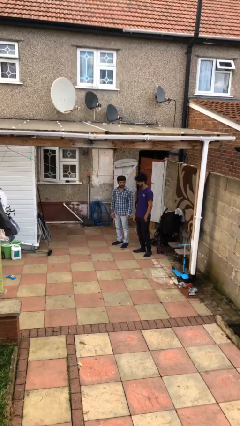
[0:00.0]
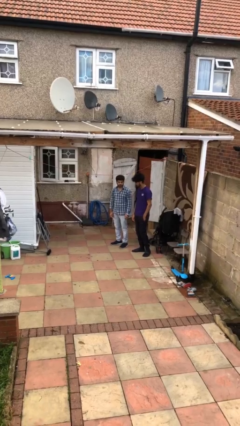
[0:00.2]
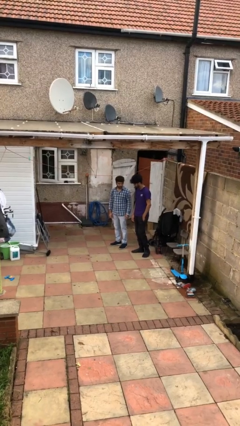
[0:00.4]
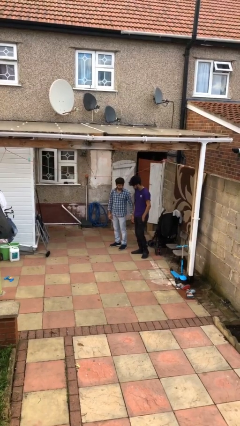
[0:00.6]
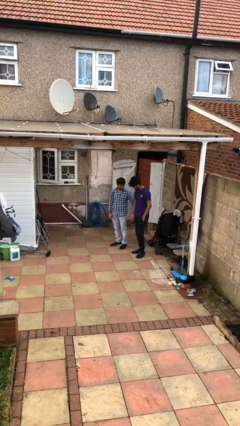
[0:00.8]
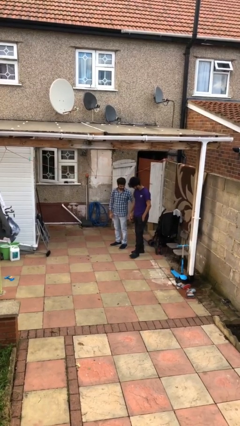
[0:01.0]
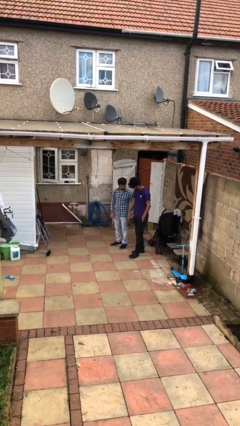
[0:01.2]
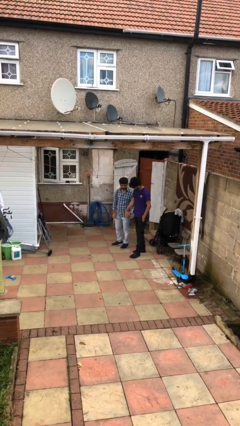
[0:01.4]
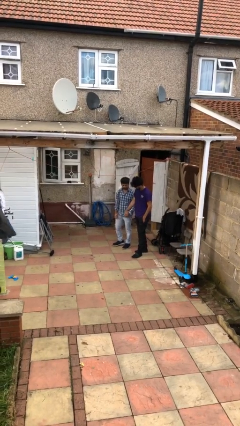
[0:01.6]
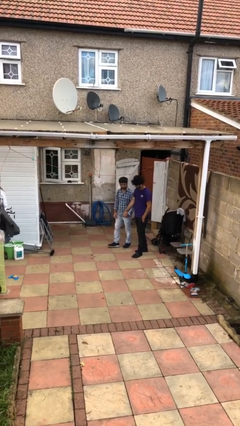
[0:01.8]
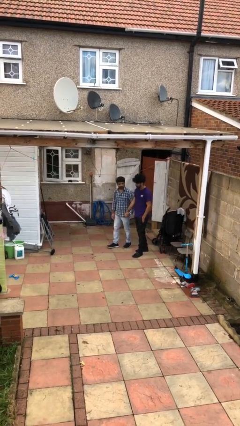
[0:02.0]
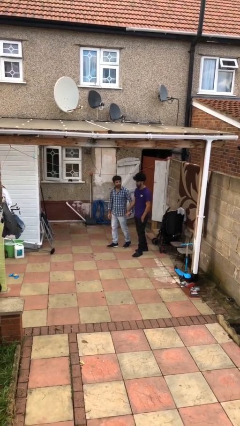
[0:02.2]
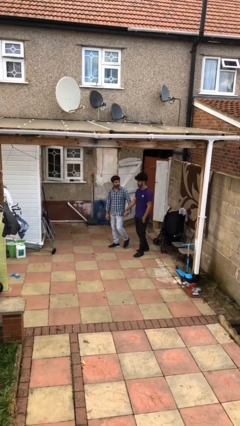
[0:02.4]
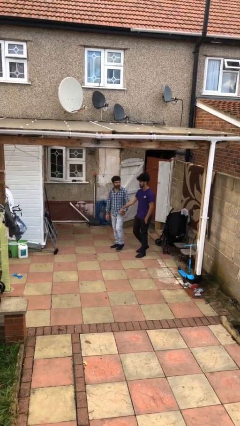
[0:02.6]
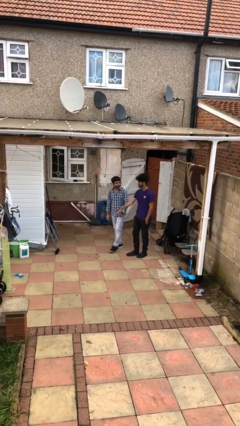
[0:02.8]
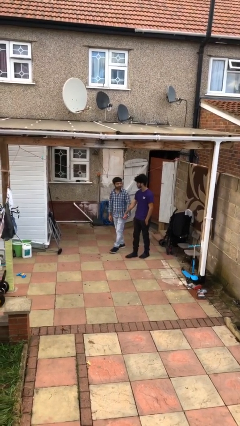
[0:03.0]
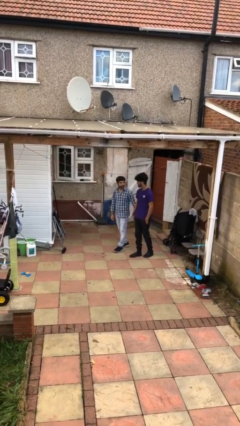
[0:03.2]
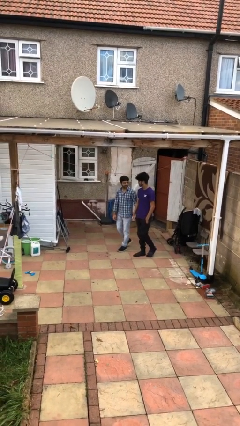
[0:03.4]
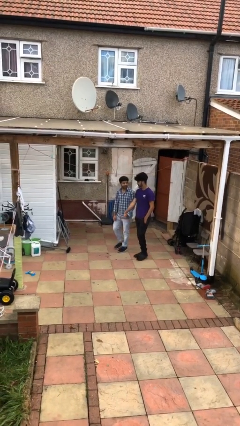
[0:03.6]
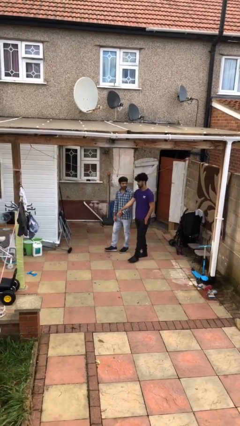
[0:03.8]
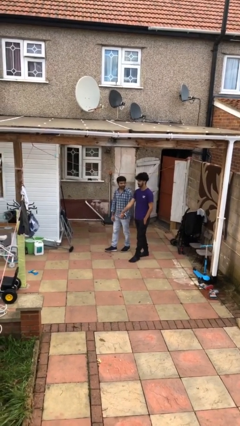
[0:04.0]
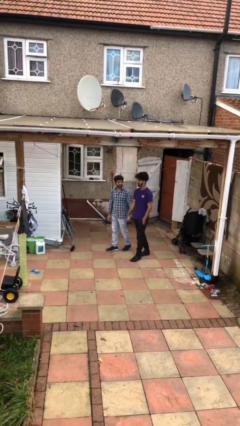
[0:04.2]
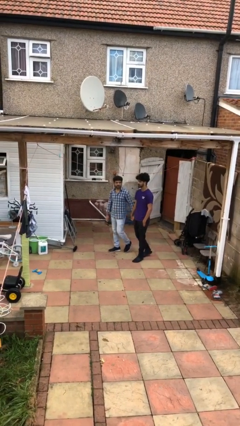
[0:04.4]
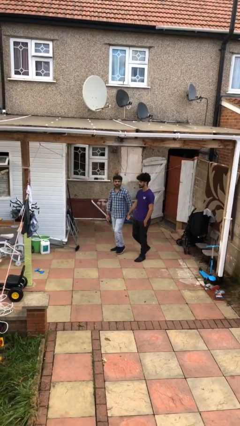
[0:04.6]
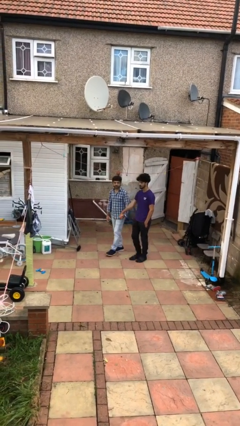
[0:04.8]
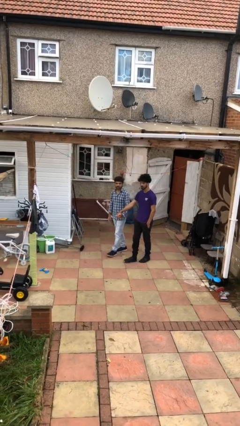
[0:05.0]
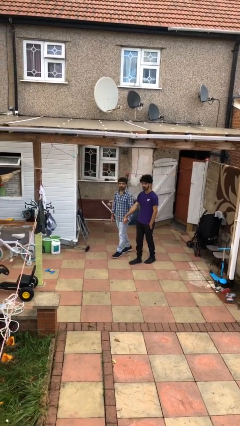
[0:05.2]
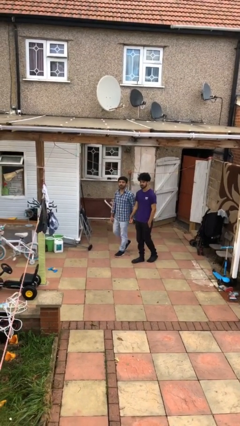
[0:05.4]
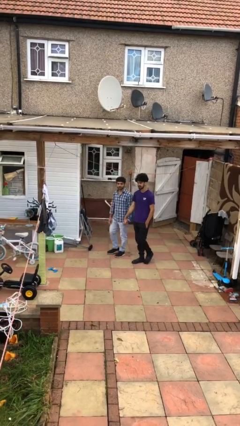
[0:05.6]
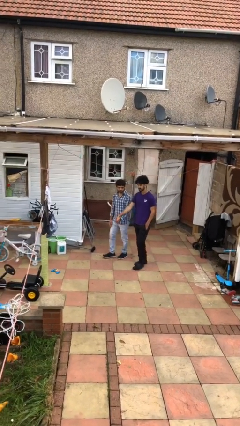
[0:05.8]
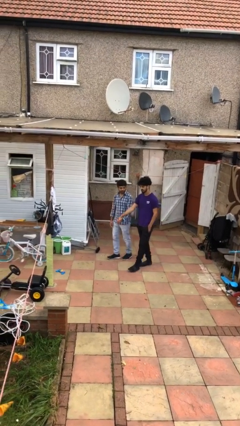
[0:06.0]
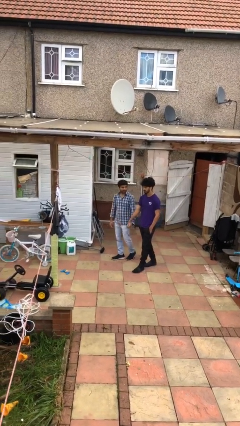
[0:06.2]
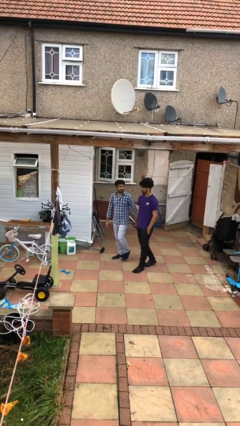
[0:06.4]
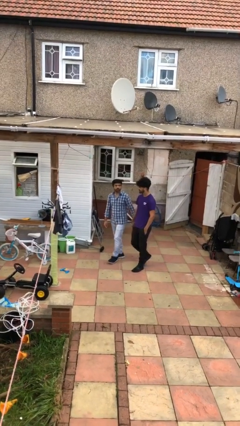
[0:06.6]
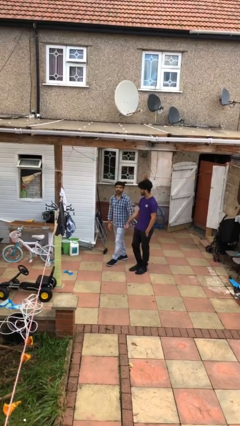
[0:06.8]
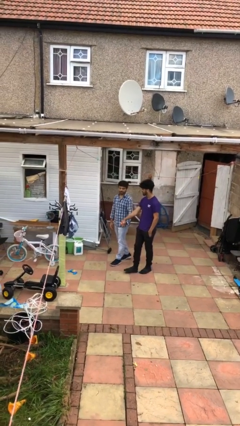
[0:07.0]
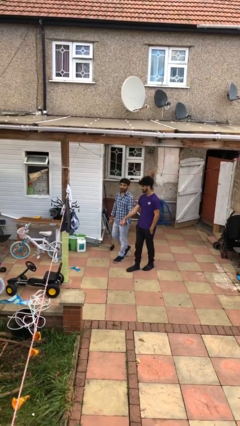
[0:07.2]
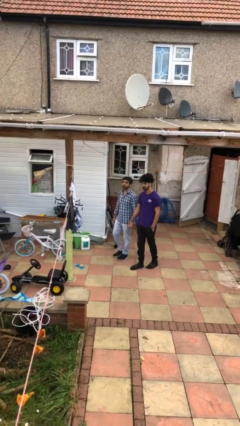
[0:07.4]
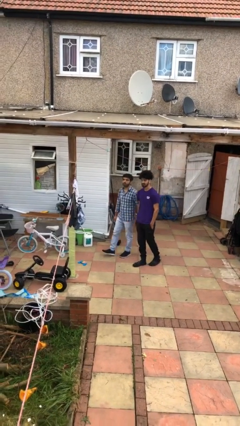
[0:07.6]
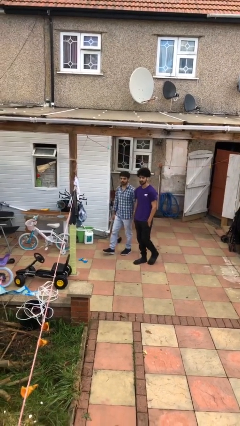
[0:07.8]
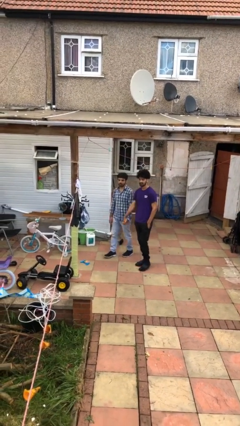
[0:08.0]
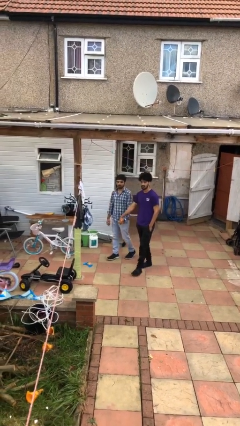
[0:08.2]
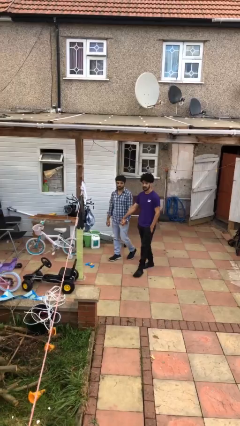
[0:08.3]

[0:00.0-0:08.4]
person holds hand

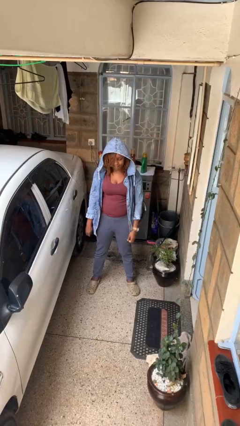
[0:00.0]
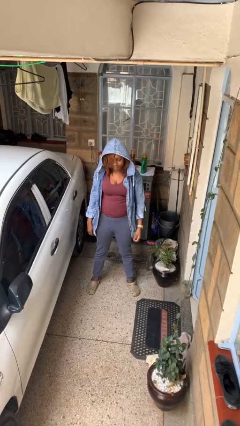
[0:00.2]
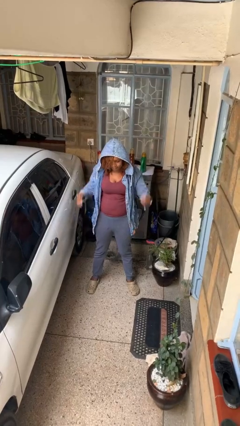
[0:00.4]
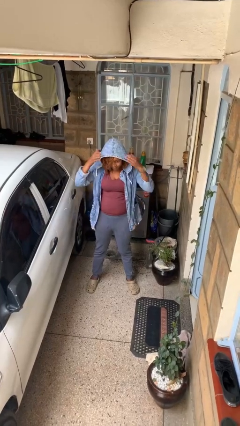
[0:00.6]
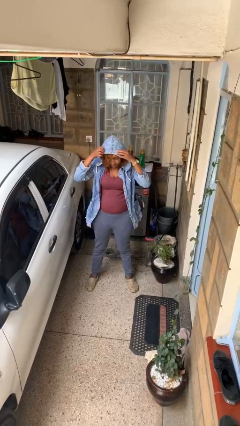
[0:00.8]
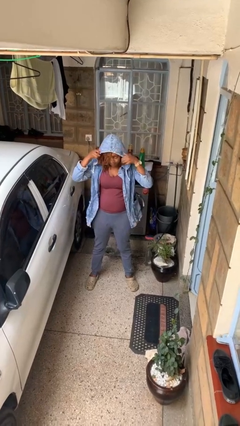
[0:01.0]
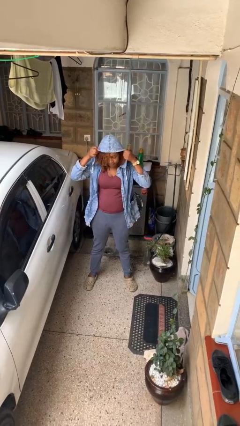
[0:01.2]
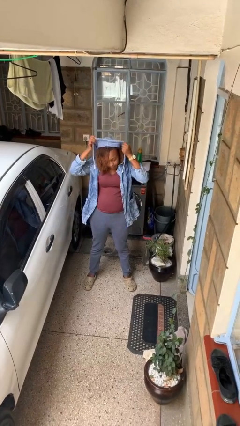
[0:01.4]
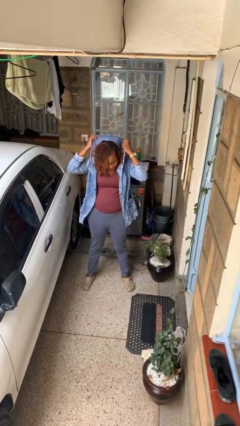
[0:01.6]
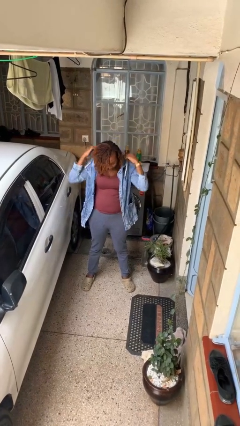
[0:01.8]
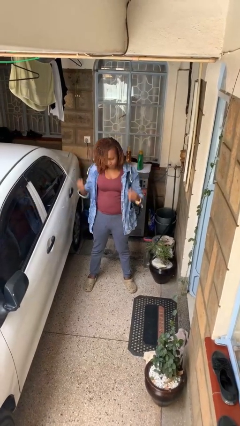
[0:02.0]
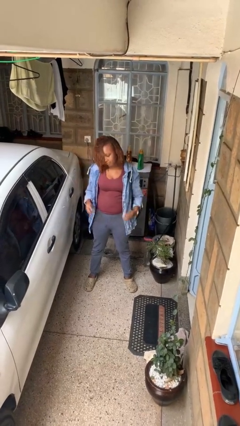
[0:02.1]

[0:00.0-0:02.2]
person takes off hoodie

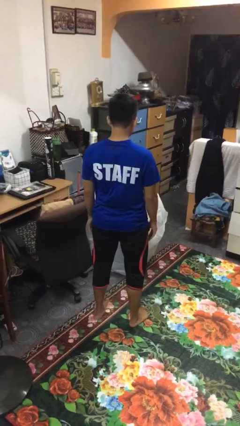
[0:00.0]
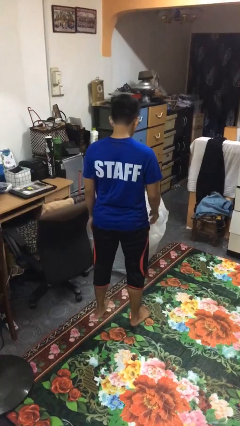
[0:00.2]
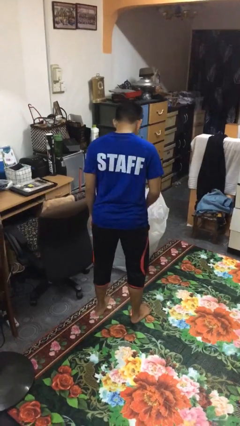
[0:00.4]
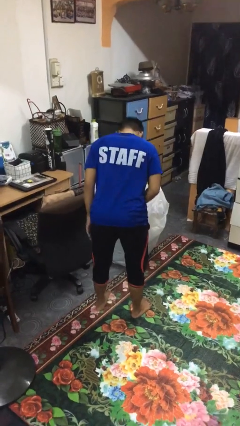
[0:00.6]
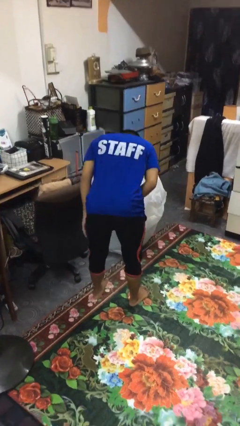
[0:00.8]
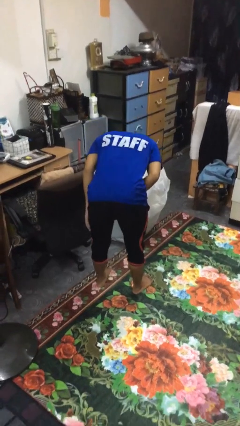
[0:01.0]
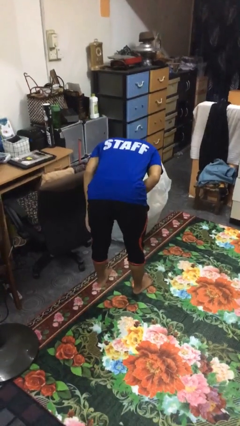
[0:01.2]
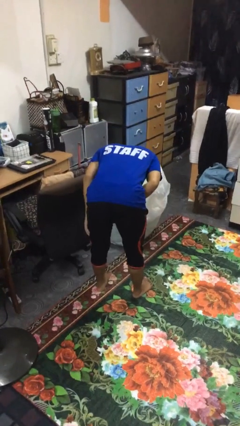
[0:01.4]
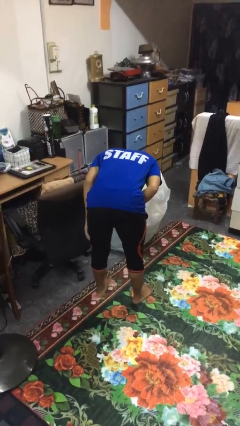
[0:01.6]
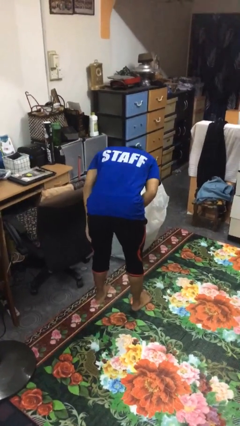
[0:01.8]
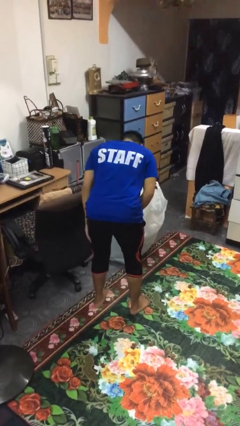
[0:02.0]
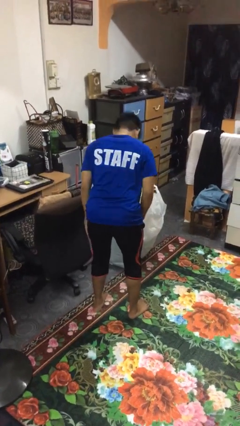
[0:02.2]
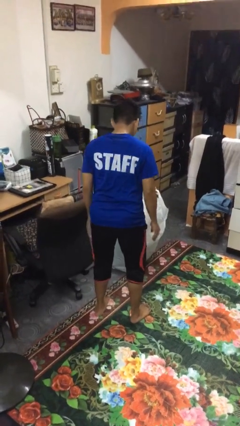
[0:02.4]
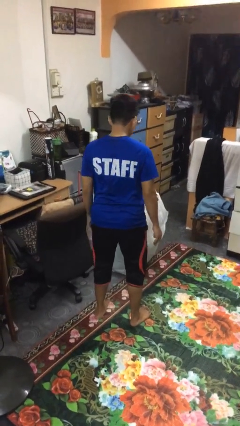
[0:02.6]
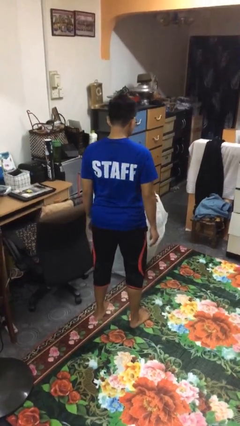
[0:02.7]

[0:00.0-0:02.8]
person bows

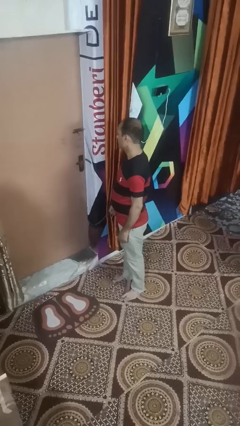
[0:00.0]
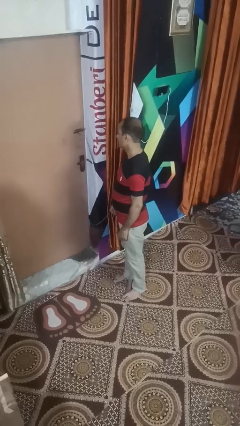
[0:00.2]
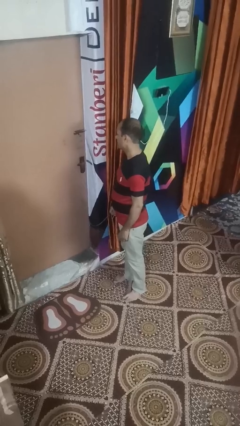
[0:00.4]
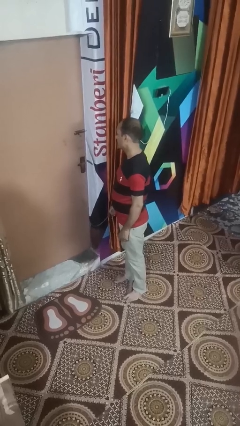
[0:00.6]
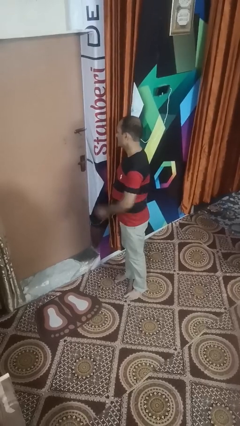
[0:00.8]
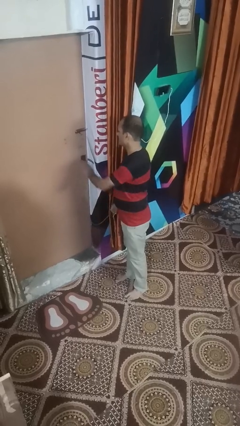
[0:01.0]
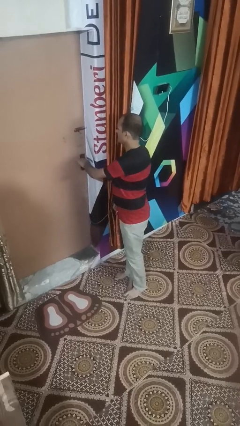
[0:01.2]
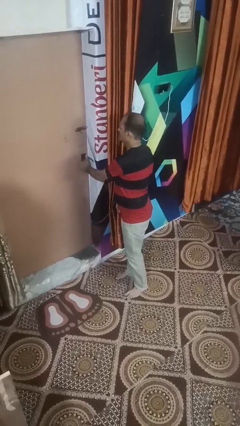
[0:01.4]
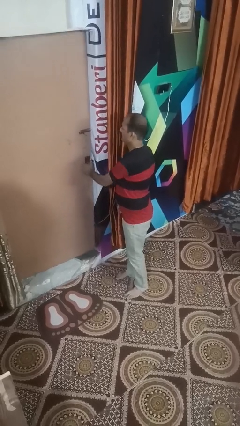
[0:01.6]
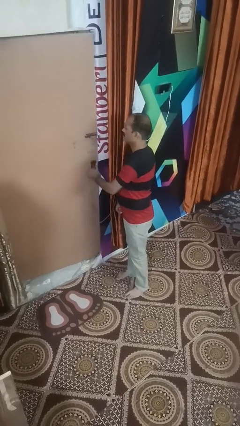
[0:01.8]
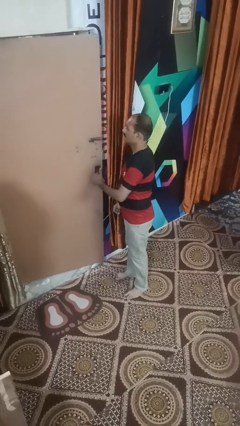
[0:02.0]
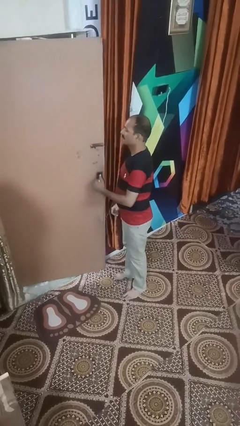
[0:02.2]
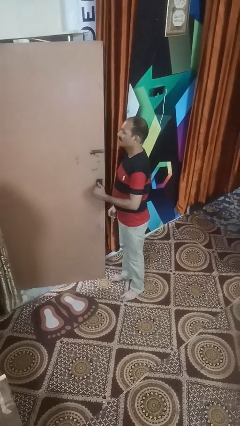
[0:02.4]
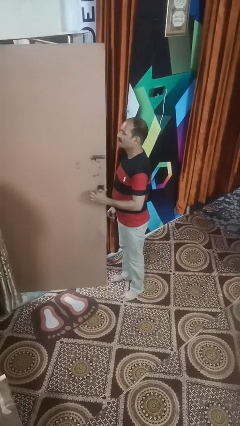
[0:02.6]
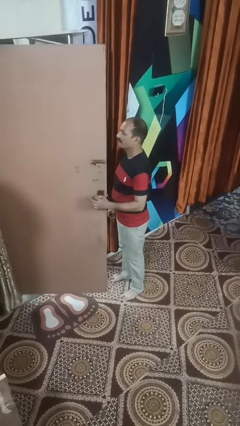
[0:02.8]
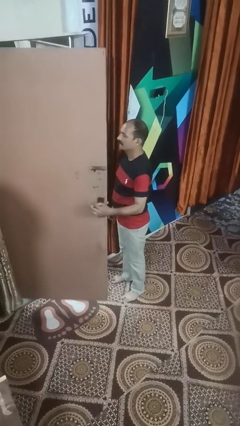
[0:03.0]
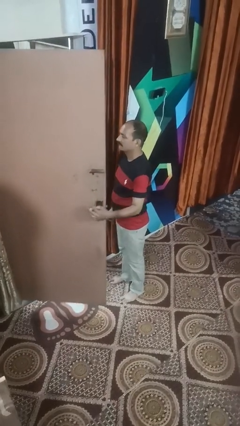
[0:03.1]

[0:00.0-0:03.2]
person opens facility door

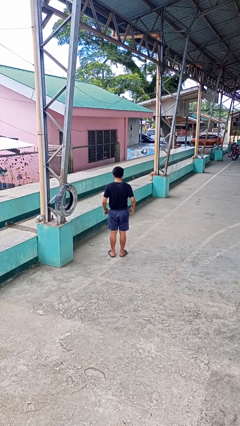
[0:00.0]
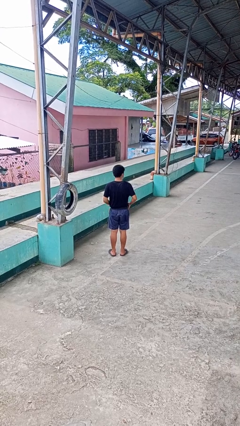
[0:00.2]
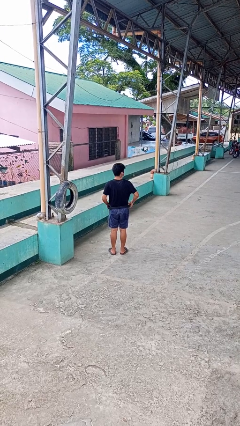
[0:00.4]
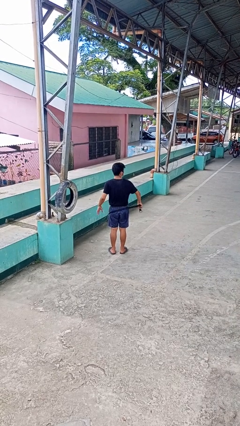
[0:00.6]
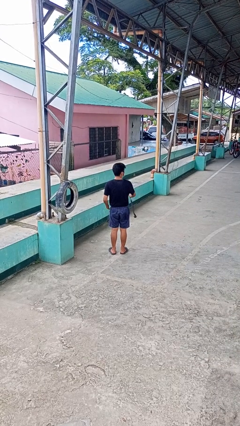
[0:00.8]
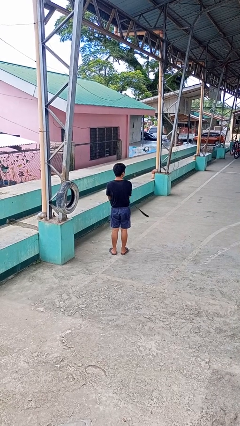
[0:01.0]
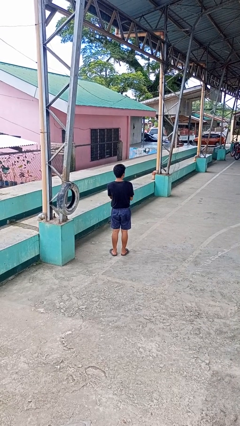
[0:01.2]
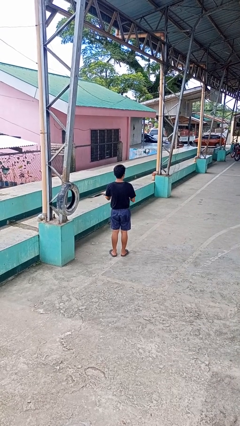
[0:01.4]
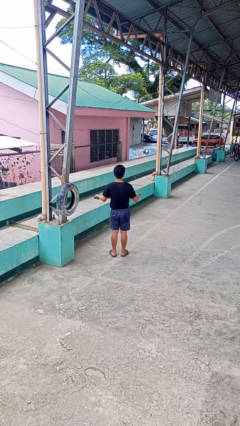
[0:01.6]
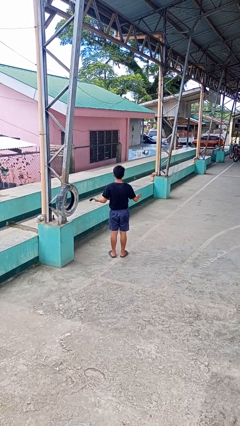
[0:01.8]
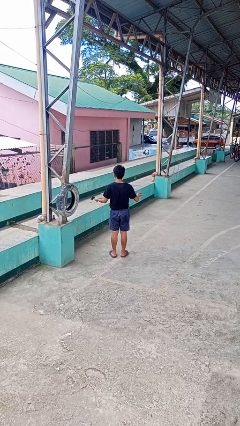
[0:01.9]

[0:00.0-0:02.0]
person takes off belt
